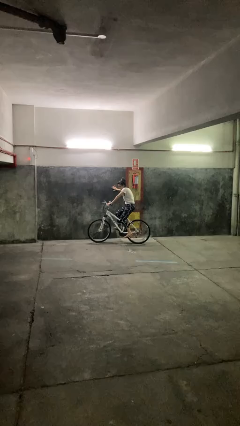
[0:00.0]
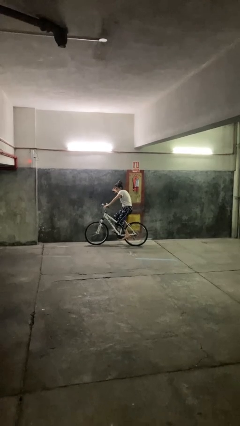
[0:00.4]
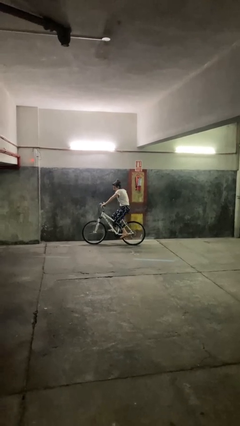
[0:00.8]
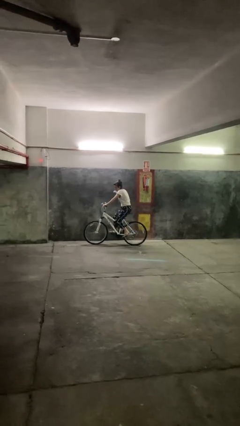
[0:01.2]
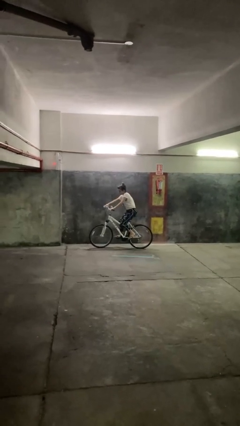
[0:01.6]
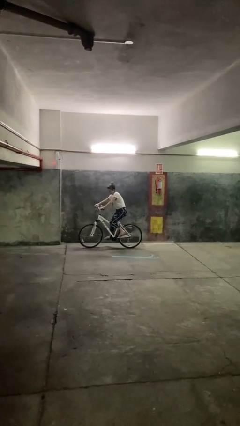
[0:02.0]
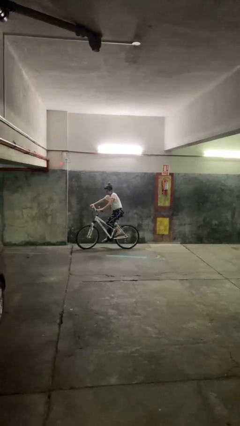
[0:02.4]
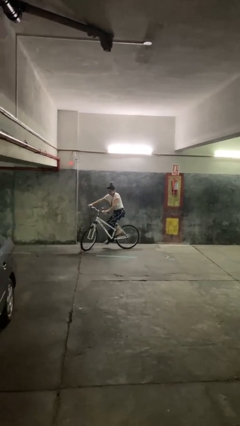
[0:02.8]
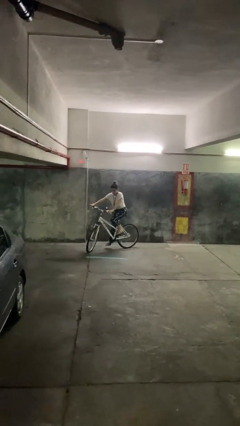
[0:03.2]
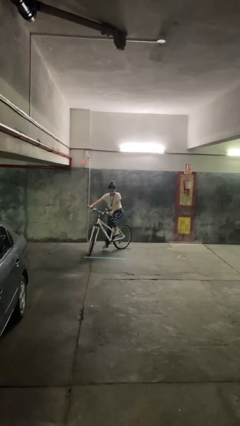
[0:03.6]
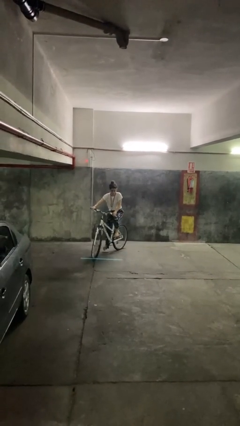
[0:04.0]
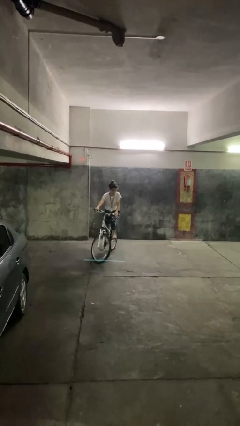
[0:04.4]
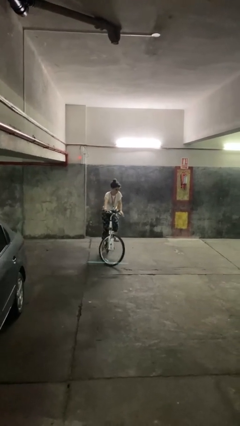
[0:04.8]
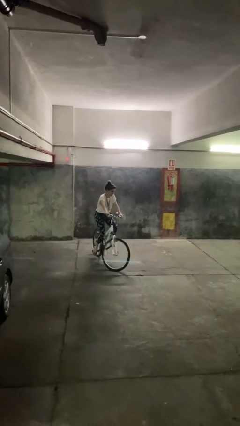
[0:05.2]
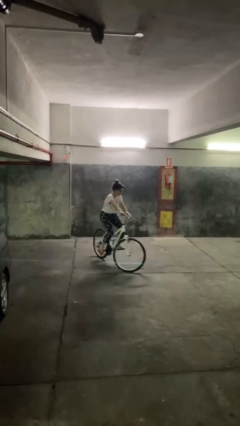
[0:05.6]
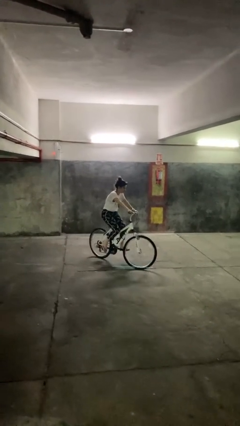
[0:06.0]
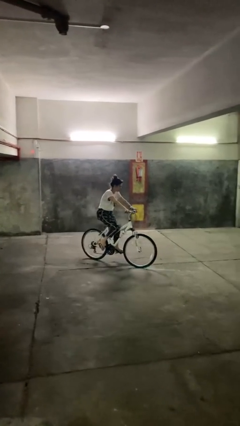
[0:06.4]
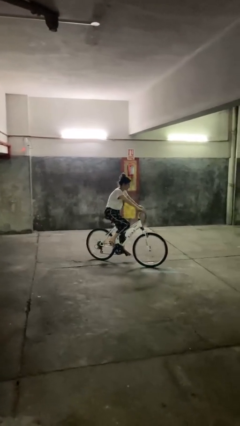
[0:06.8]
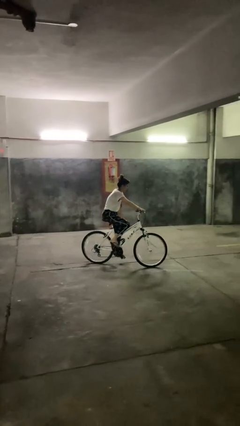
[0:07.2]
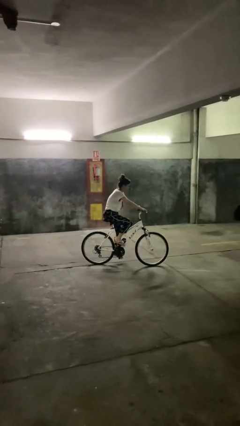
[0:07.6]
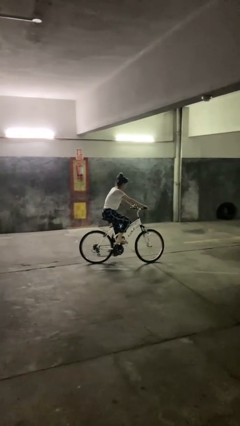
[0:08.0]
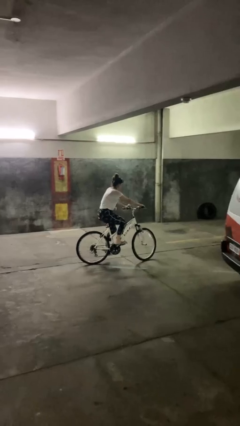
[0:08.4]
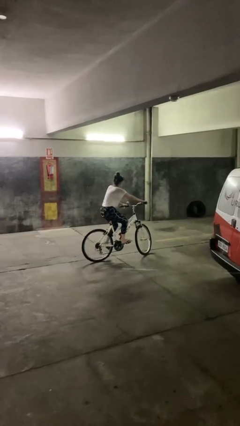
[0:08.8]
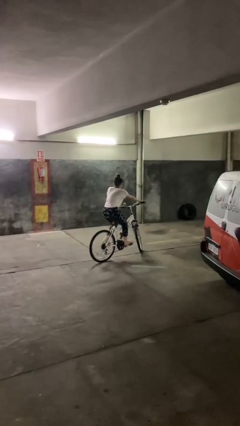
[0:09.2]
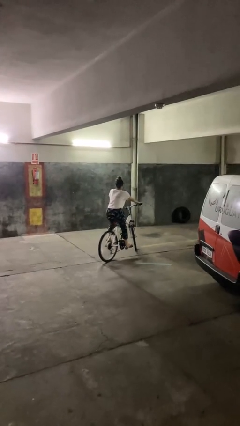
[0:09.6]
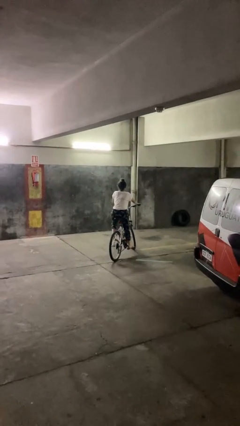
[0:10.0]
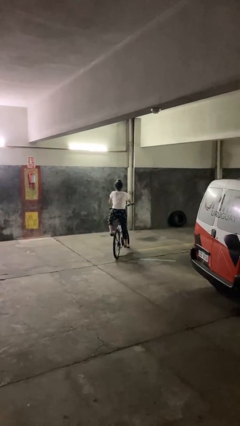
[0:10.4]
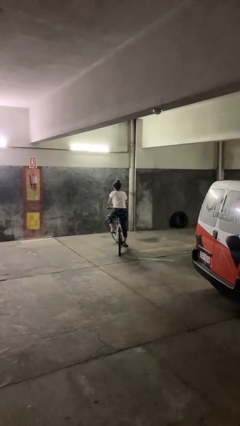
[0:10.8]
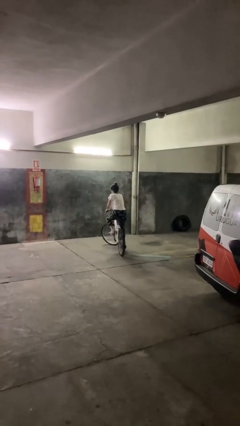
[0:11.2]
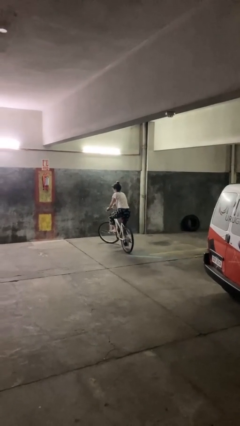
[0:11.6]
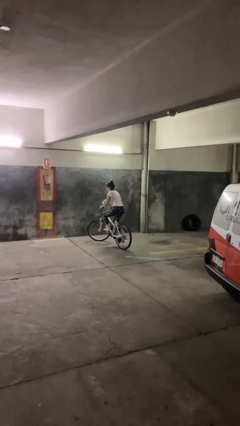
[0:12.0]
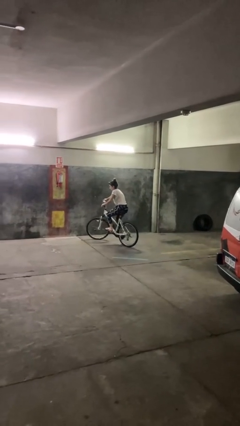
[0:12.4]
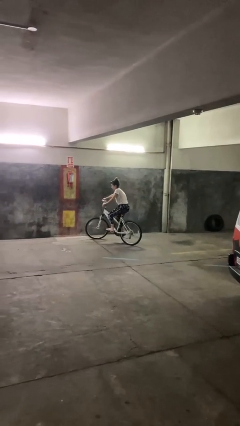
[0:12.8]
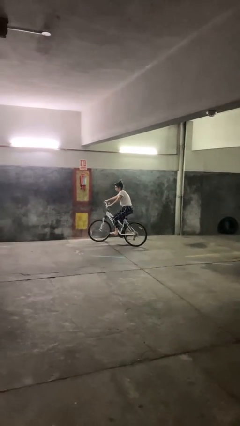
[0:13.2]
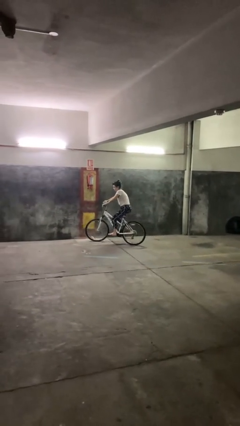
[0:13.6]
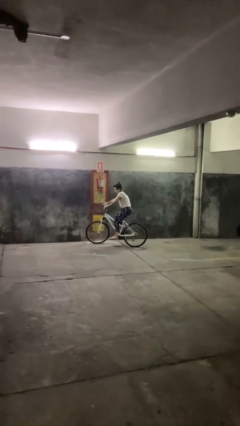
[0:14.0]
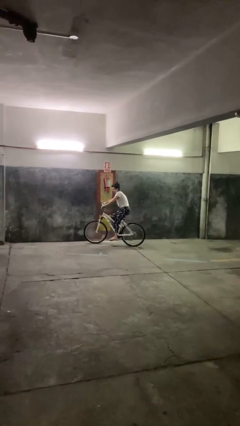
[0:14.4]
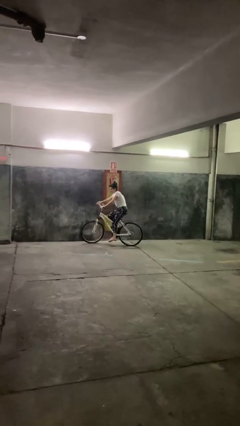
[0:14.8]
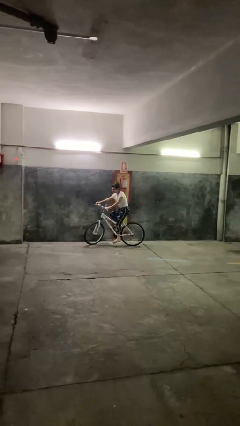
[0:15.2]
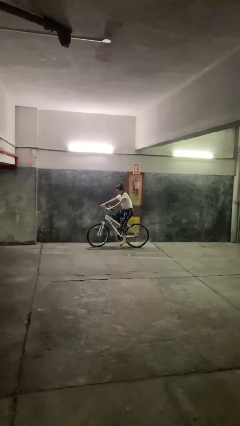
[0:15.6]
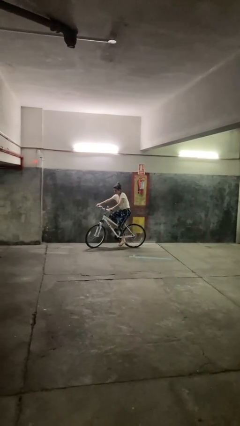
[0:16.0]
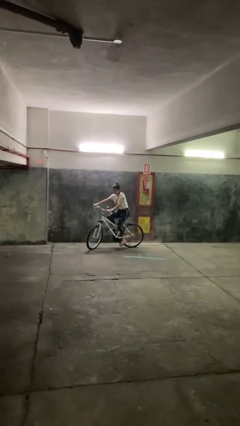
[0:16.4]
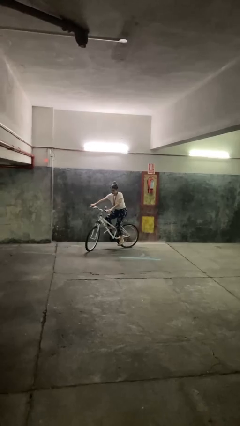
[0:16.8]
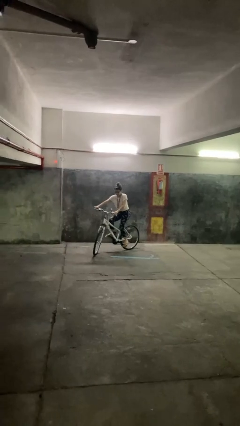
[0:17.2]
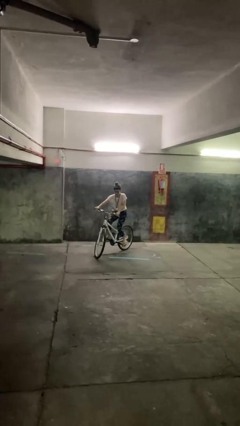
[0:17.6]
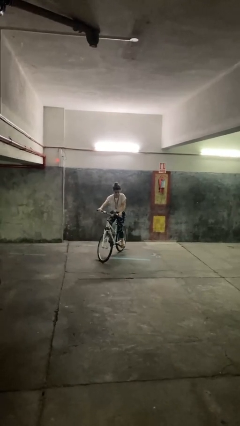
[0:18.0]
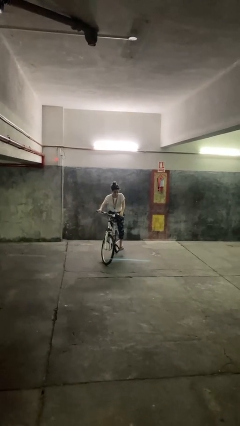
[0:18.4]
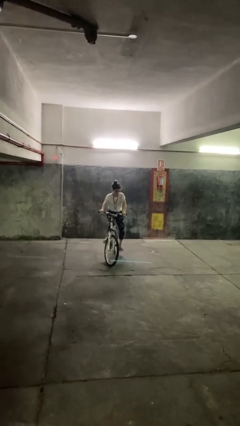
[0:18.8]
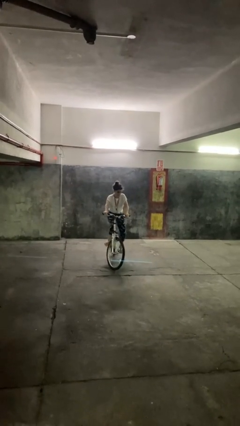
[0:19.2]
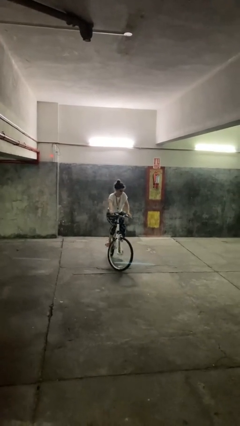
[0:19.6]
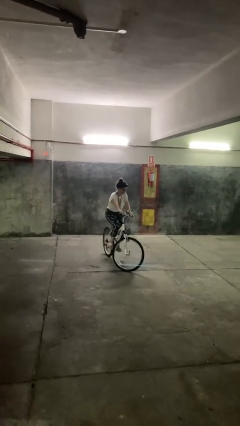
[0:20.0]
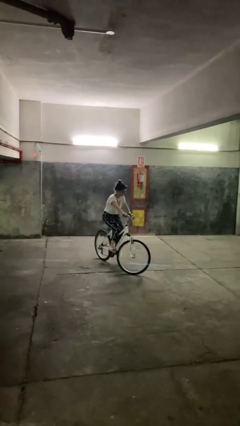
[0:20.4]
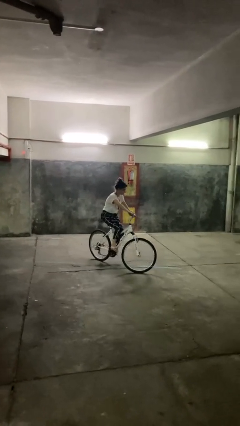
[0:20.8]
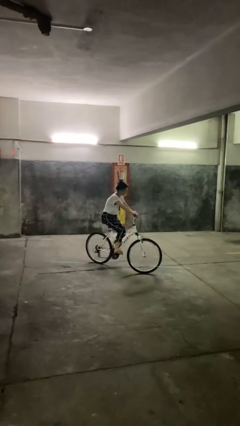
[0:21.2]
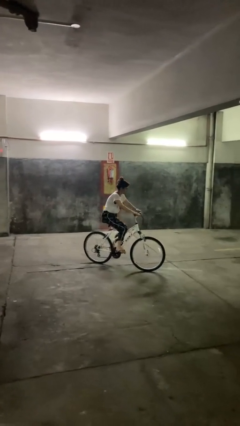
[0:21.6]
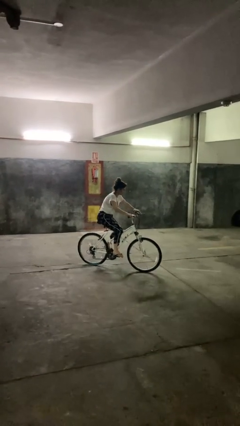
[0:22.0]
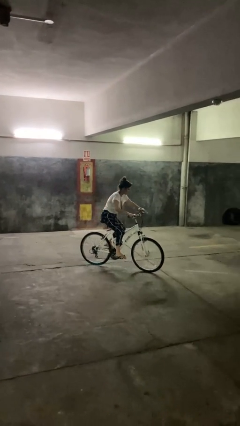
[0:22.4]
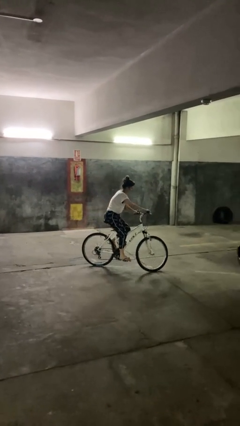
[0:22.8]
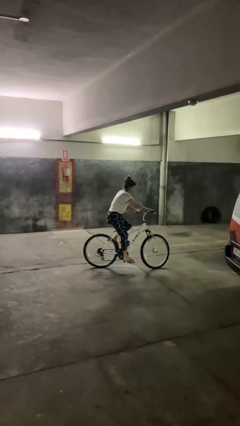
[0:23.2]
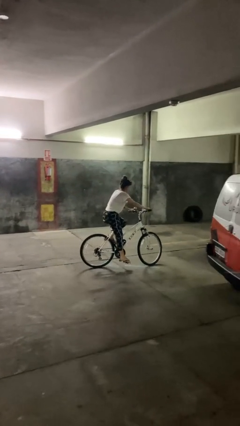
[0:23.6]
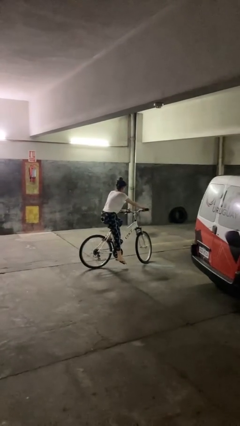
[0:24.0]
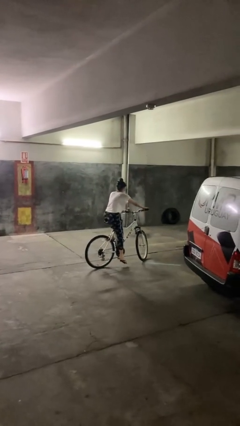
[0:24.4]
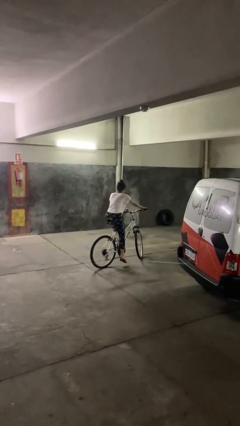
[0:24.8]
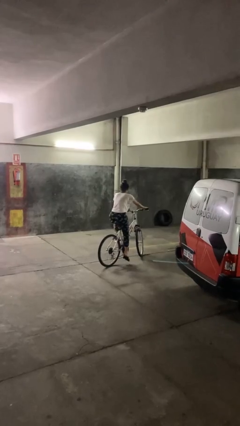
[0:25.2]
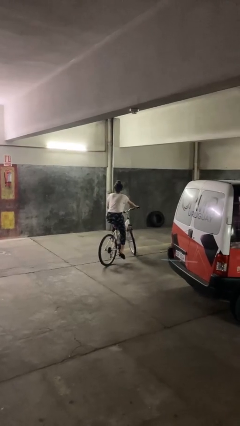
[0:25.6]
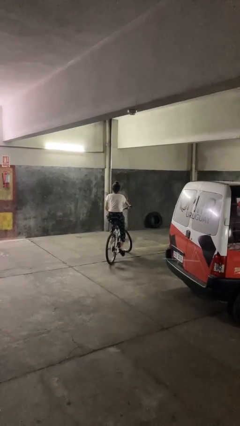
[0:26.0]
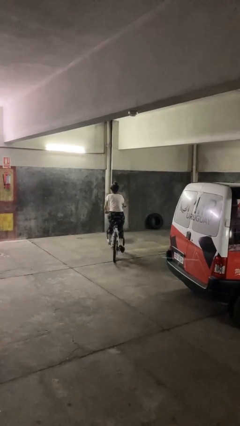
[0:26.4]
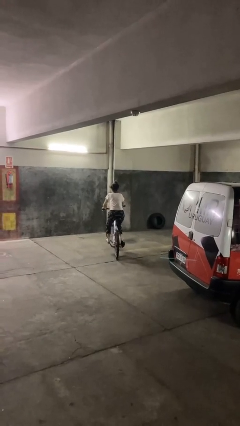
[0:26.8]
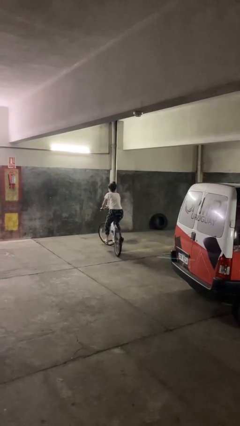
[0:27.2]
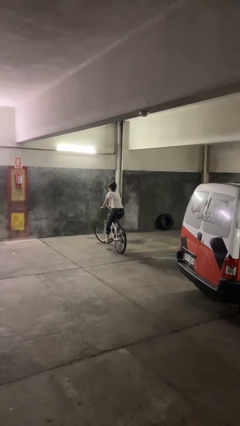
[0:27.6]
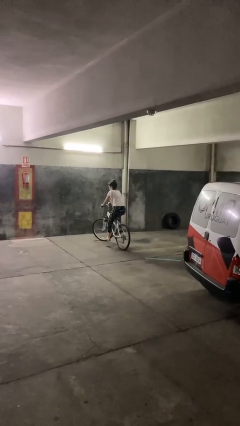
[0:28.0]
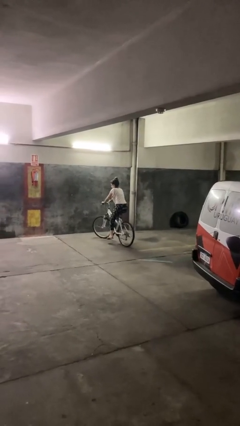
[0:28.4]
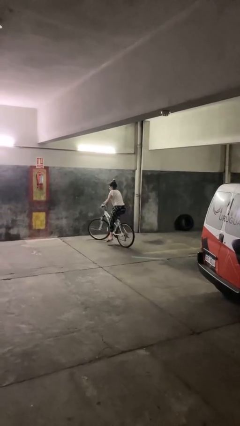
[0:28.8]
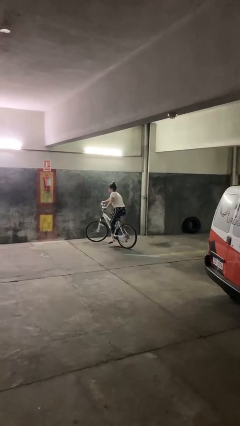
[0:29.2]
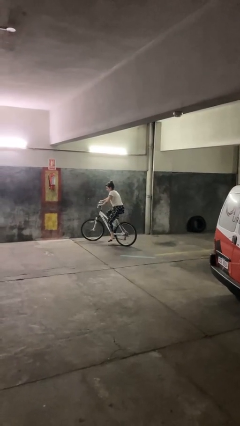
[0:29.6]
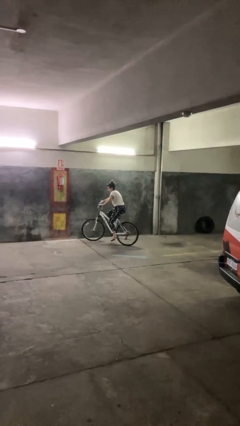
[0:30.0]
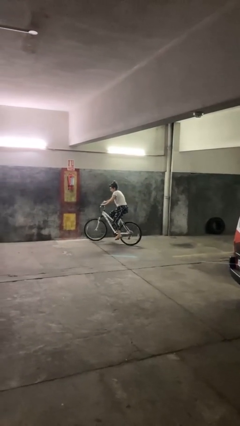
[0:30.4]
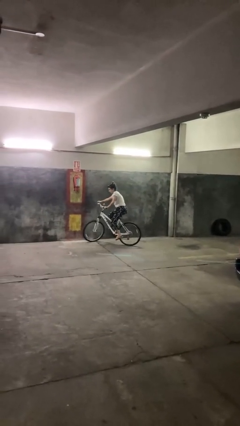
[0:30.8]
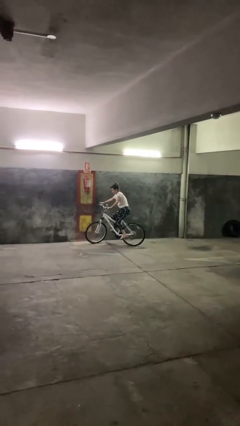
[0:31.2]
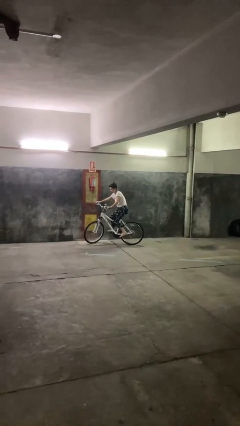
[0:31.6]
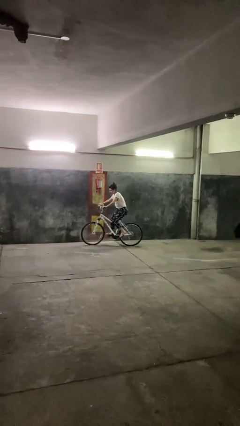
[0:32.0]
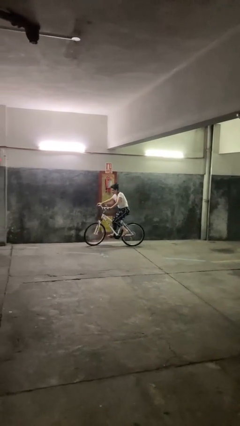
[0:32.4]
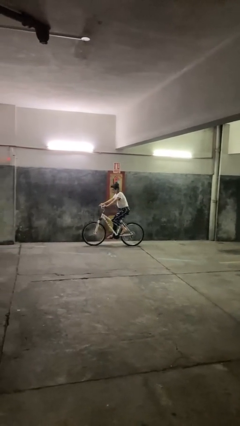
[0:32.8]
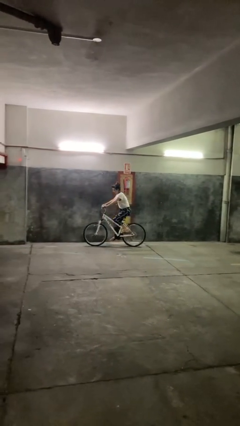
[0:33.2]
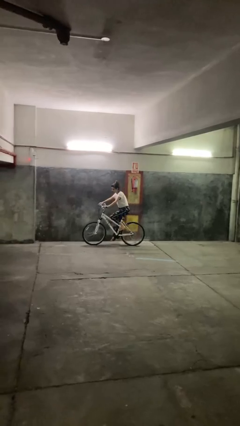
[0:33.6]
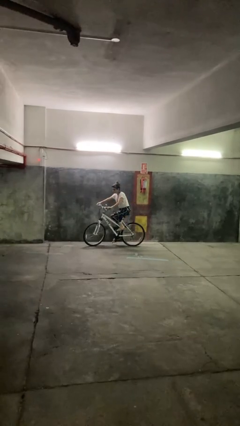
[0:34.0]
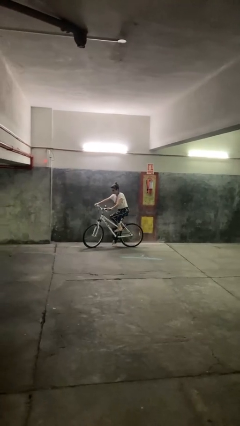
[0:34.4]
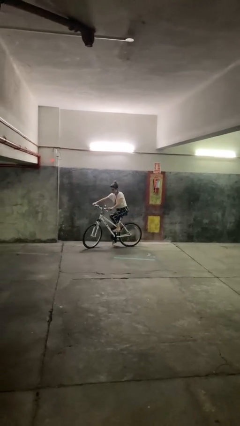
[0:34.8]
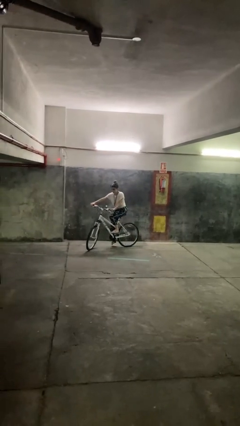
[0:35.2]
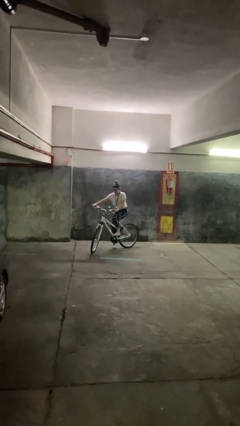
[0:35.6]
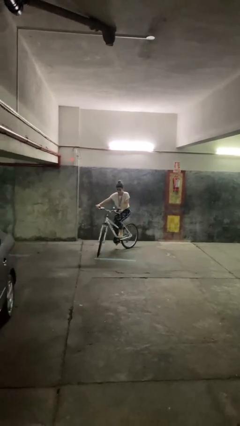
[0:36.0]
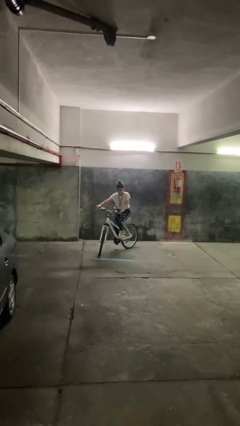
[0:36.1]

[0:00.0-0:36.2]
person rides bicycle
